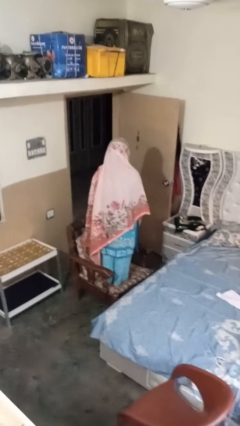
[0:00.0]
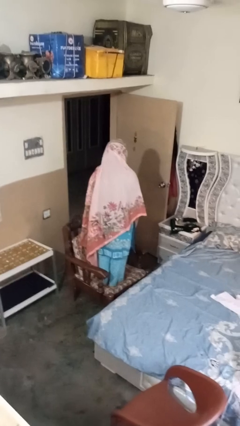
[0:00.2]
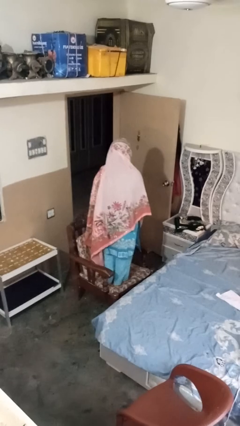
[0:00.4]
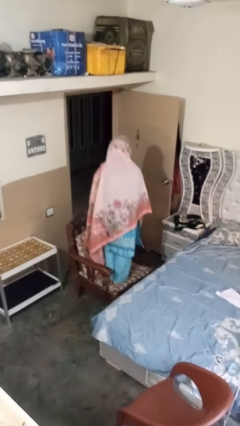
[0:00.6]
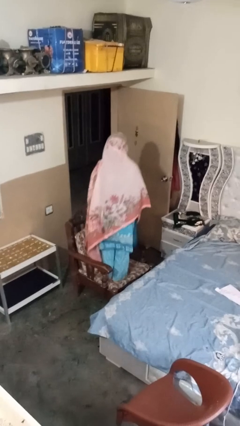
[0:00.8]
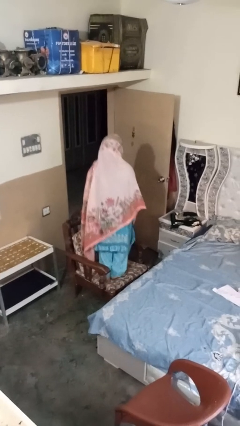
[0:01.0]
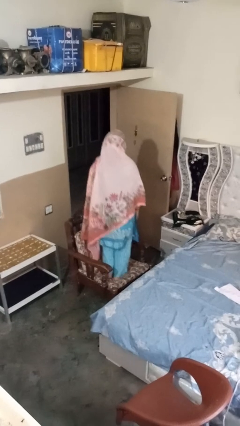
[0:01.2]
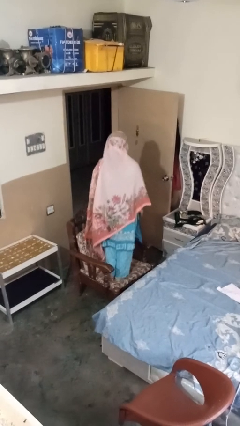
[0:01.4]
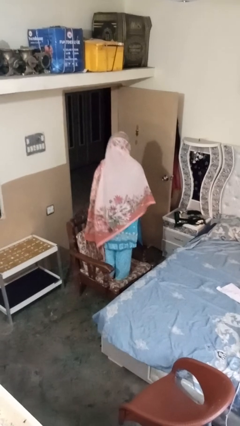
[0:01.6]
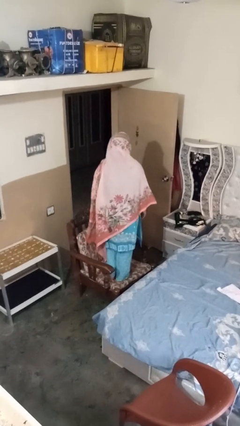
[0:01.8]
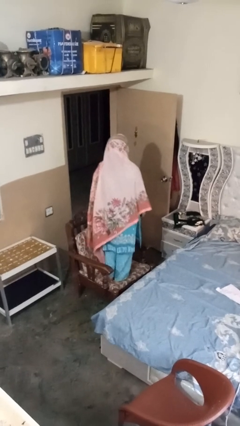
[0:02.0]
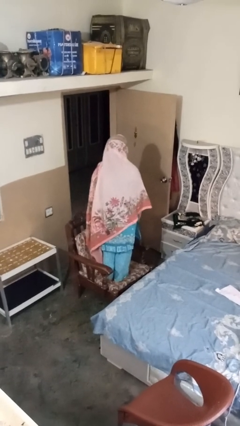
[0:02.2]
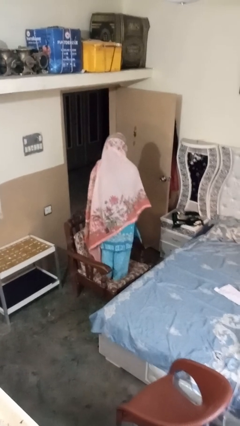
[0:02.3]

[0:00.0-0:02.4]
person jumps on couch

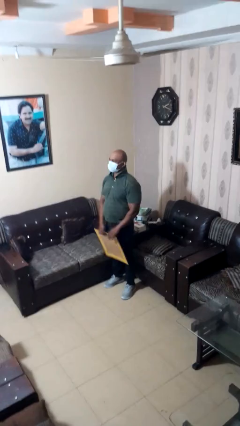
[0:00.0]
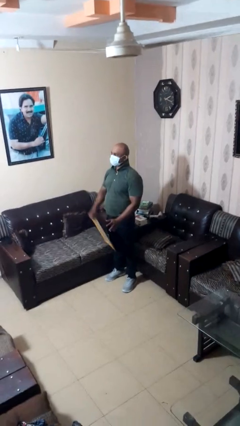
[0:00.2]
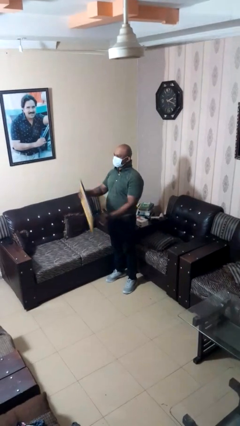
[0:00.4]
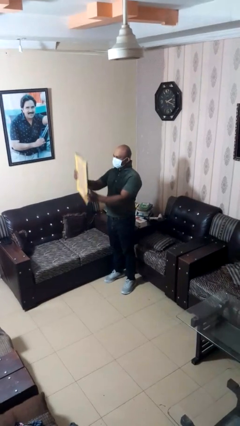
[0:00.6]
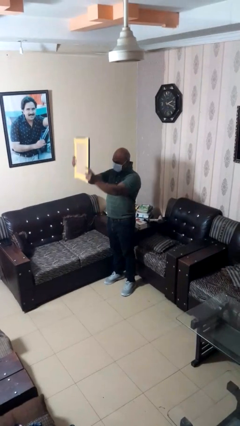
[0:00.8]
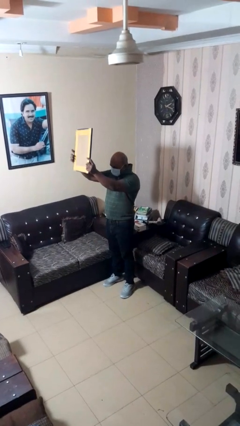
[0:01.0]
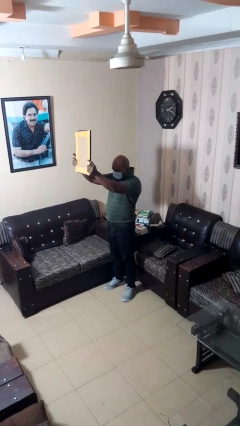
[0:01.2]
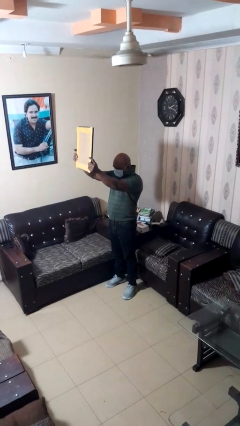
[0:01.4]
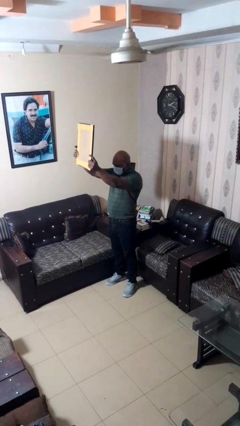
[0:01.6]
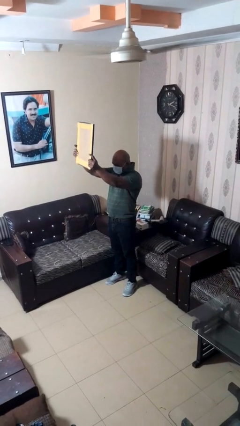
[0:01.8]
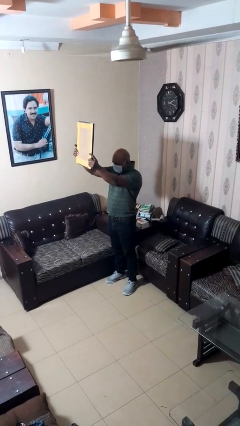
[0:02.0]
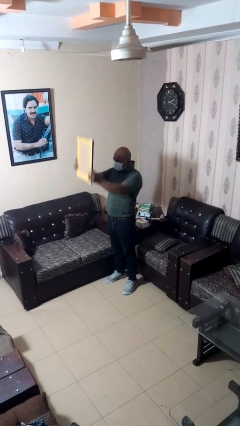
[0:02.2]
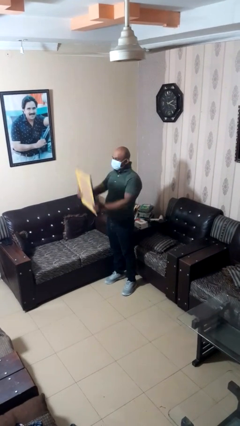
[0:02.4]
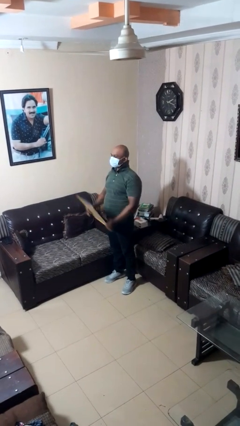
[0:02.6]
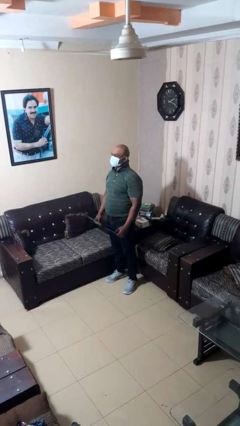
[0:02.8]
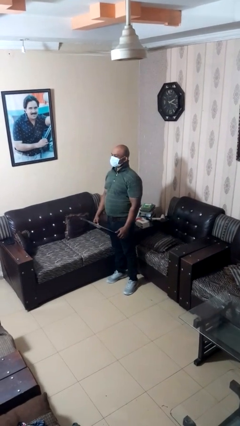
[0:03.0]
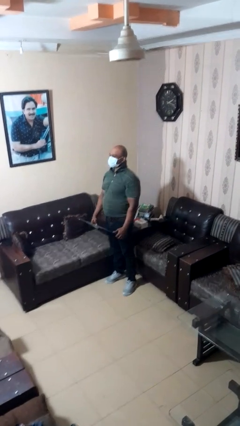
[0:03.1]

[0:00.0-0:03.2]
person holds object above head

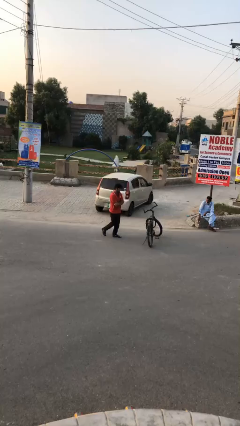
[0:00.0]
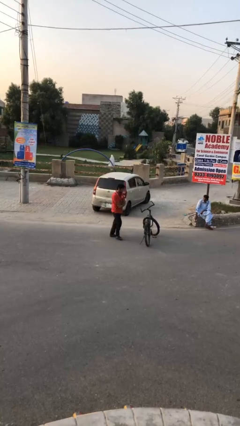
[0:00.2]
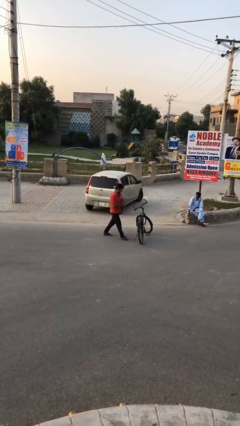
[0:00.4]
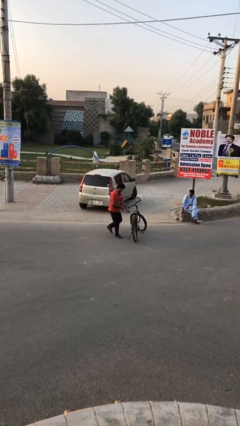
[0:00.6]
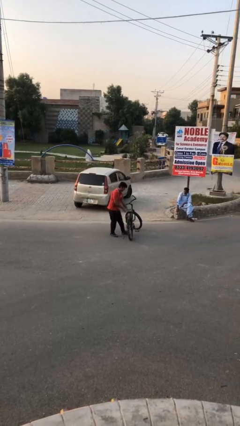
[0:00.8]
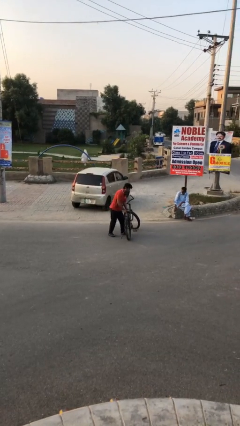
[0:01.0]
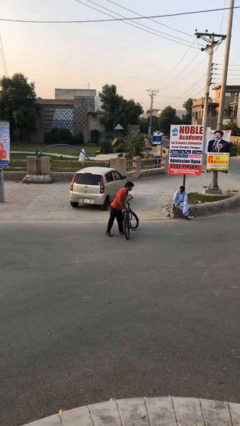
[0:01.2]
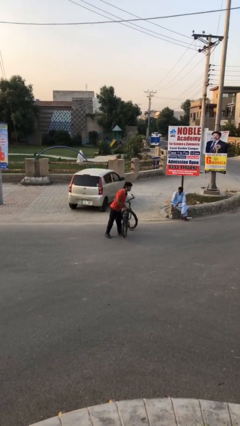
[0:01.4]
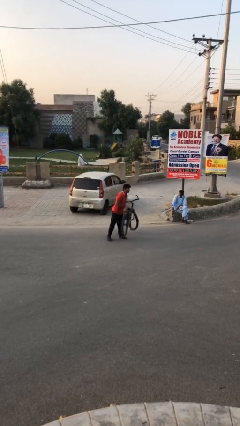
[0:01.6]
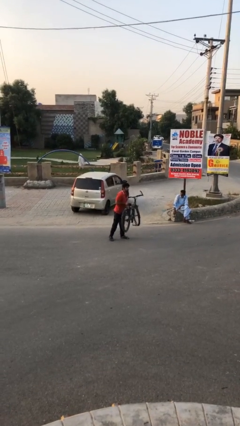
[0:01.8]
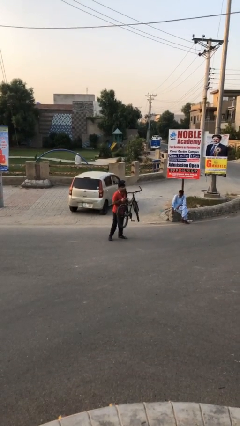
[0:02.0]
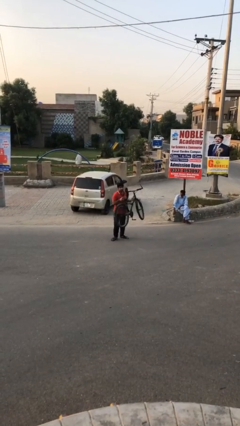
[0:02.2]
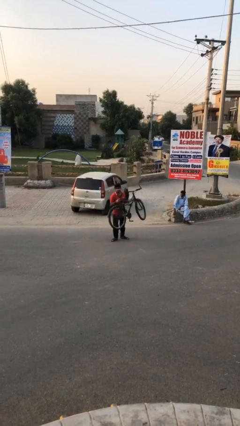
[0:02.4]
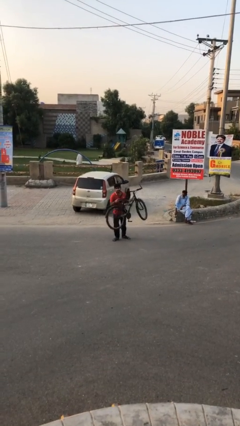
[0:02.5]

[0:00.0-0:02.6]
person picks up object from floor

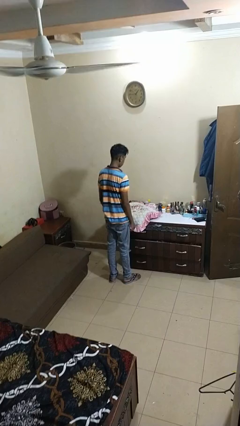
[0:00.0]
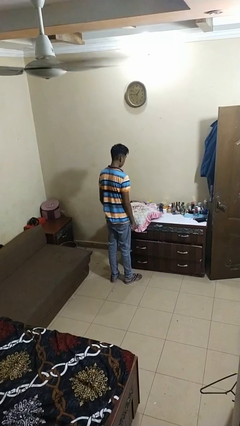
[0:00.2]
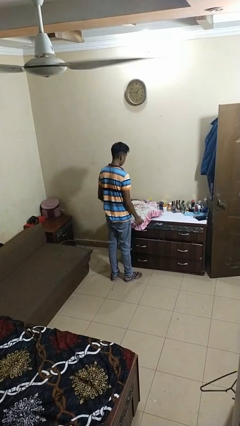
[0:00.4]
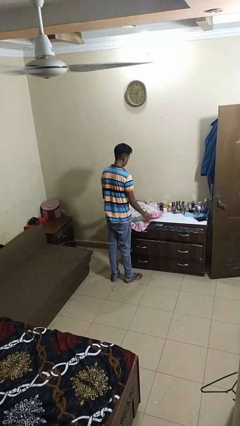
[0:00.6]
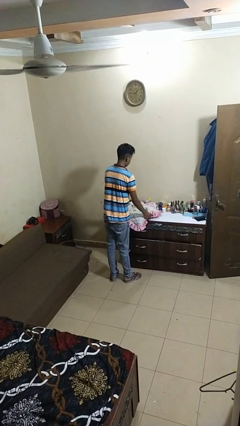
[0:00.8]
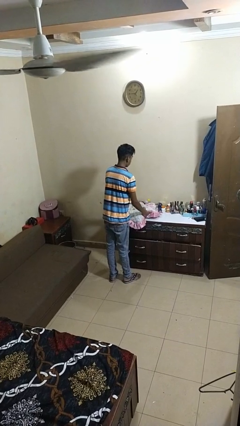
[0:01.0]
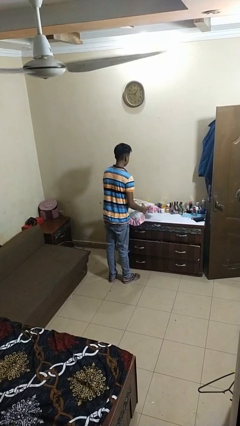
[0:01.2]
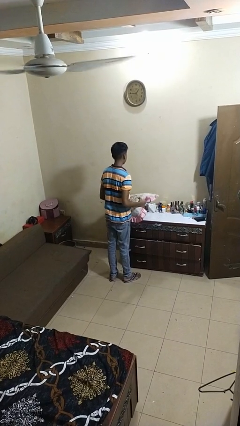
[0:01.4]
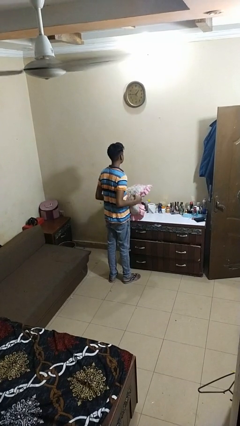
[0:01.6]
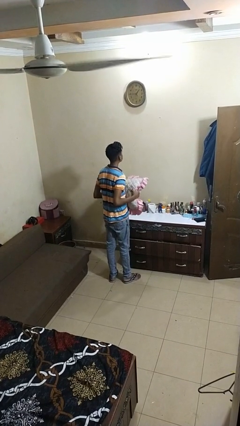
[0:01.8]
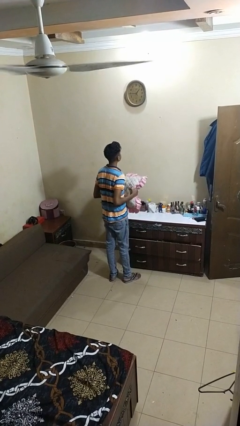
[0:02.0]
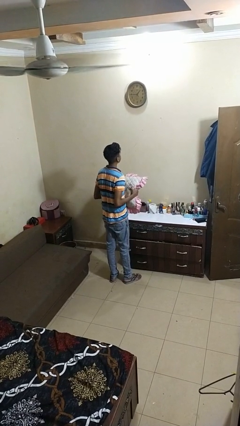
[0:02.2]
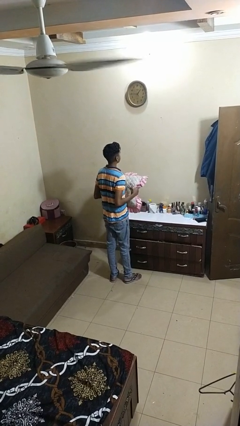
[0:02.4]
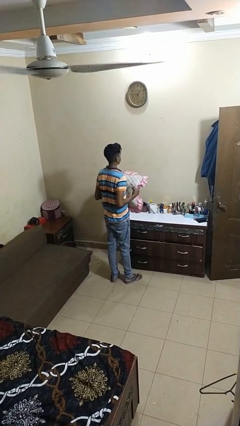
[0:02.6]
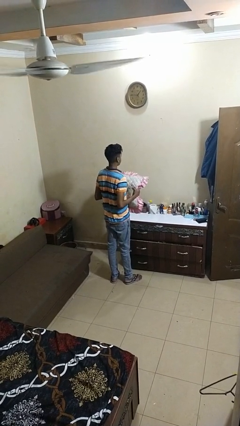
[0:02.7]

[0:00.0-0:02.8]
person picks up object from countertop

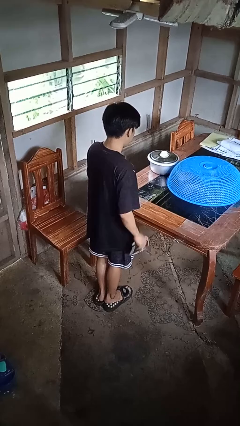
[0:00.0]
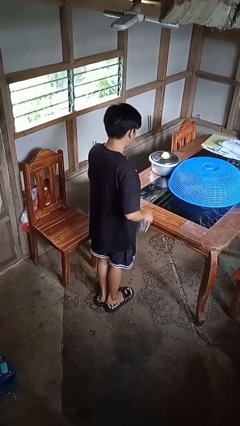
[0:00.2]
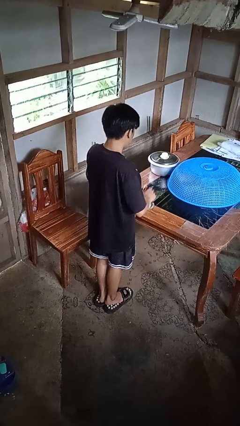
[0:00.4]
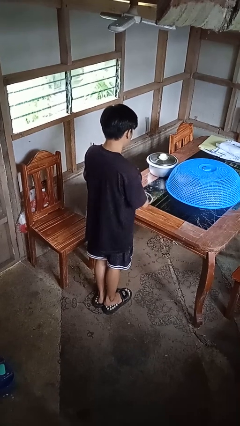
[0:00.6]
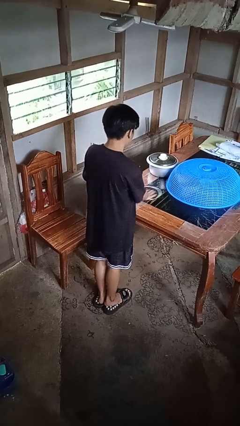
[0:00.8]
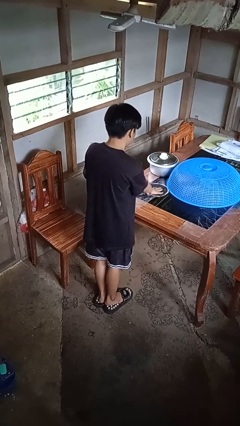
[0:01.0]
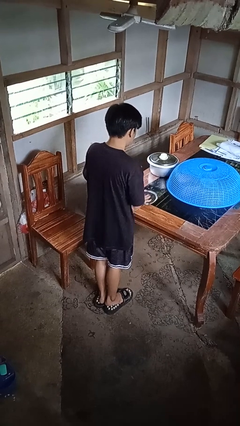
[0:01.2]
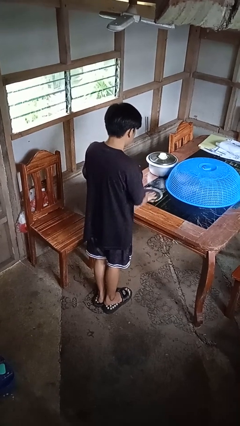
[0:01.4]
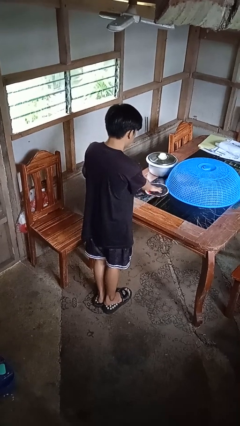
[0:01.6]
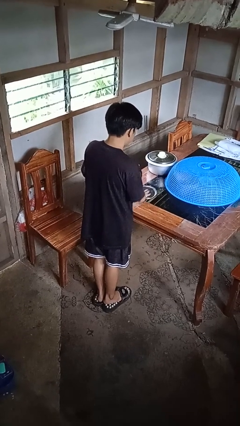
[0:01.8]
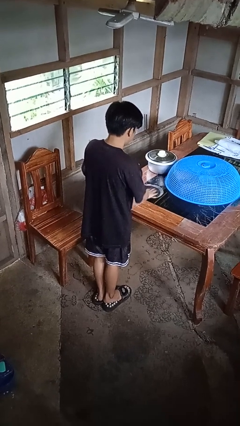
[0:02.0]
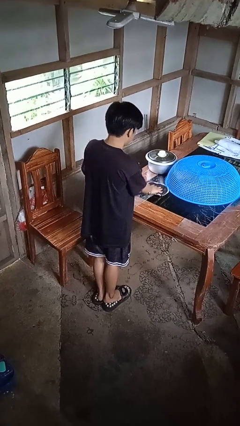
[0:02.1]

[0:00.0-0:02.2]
person cleans table with rag

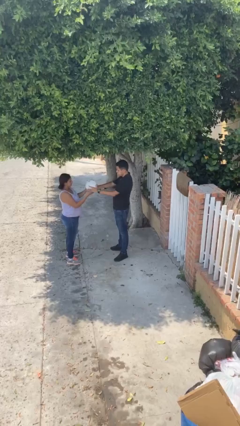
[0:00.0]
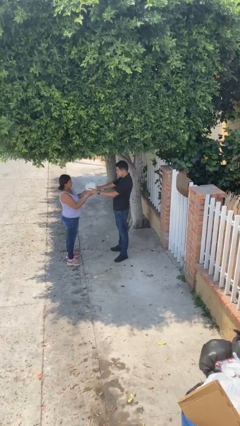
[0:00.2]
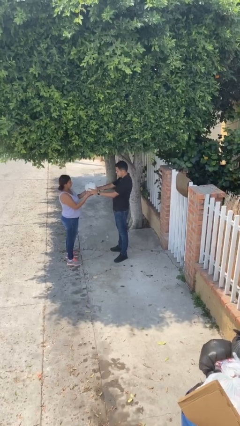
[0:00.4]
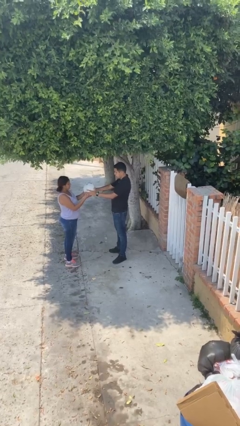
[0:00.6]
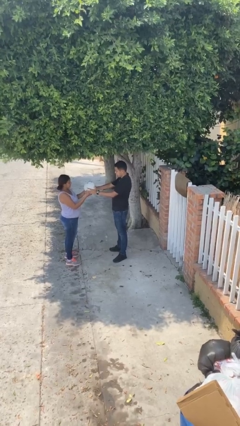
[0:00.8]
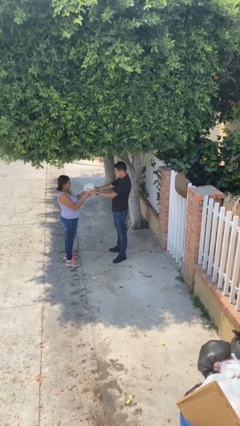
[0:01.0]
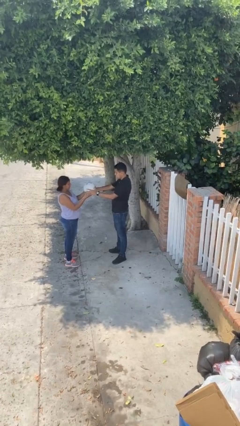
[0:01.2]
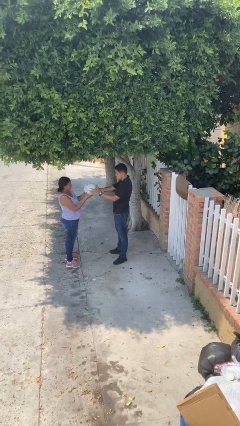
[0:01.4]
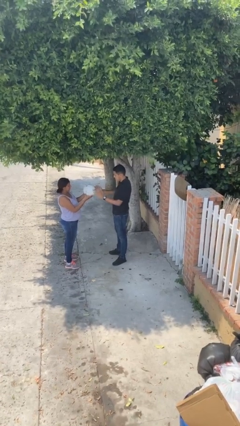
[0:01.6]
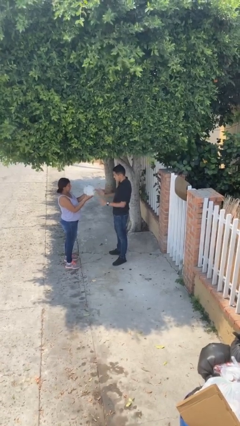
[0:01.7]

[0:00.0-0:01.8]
person transfers object to person

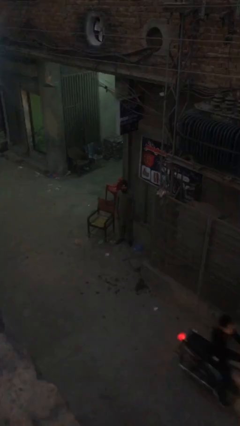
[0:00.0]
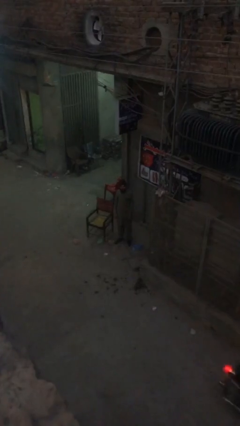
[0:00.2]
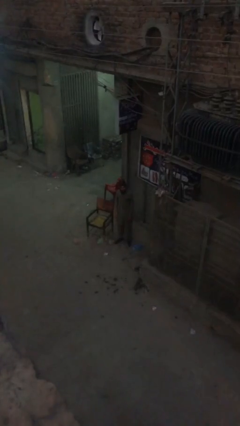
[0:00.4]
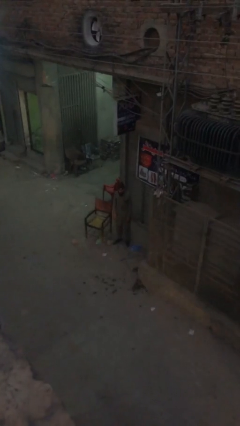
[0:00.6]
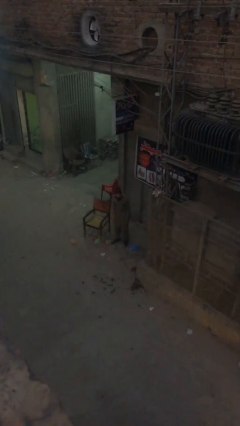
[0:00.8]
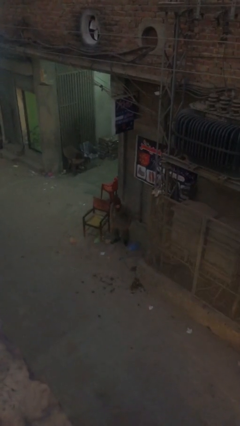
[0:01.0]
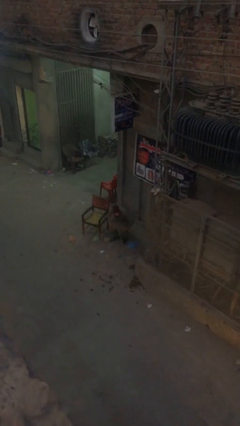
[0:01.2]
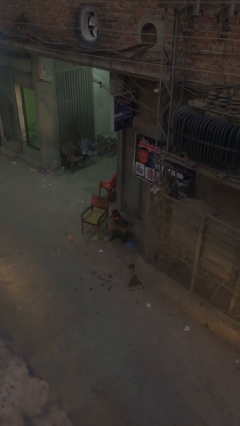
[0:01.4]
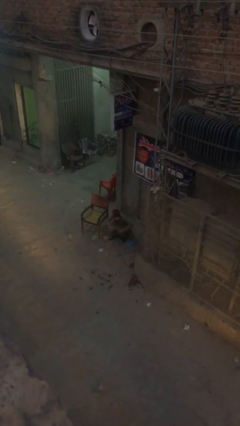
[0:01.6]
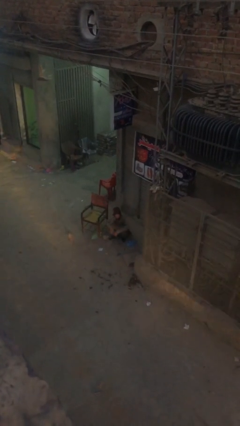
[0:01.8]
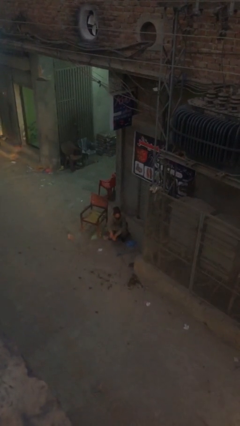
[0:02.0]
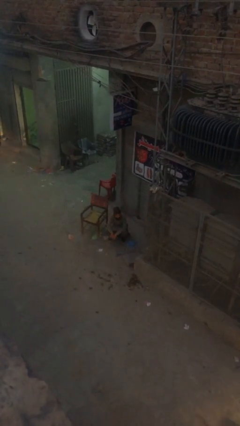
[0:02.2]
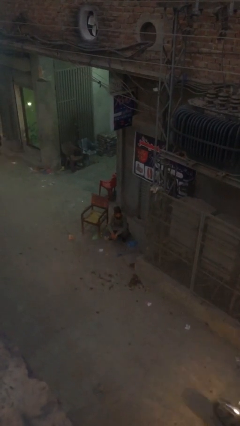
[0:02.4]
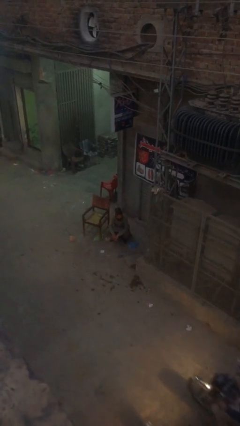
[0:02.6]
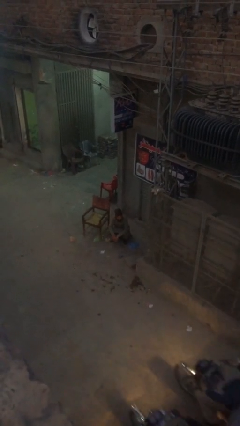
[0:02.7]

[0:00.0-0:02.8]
person sits down
